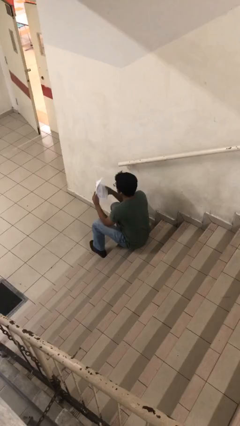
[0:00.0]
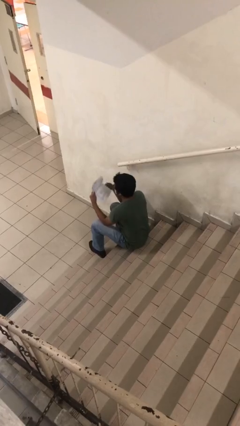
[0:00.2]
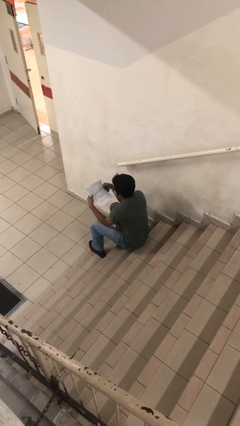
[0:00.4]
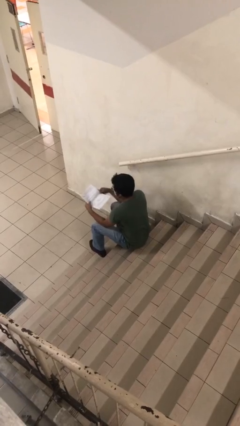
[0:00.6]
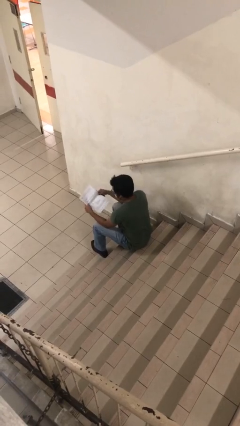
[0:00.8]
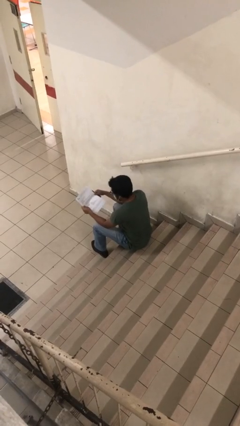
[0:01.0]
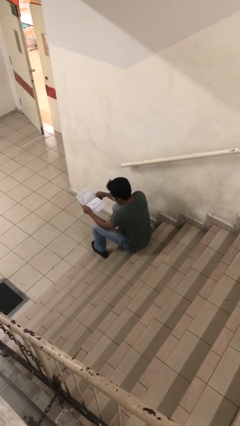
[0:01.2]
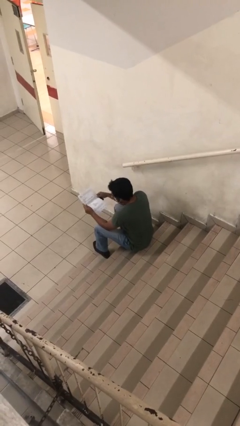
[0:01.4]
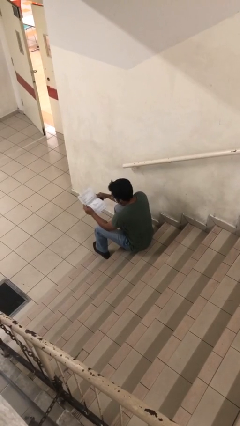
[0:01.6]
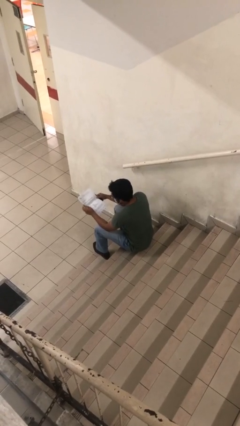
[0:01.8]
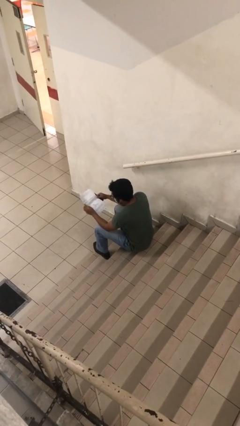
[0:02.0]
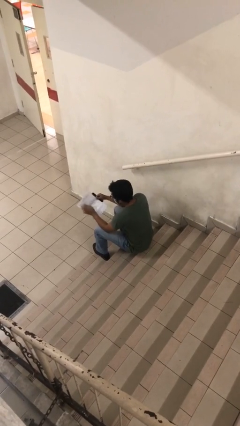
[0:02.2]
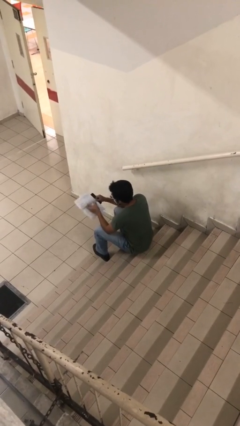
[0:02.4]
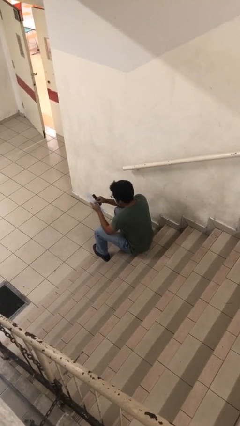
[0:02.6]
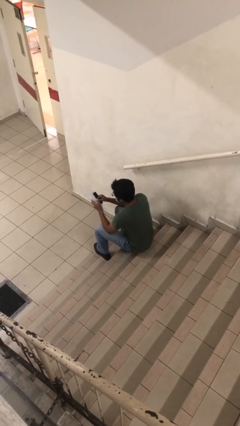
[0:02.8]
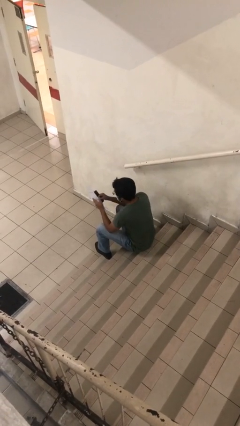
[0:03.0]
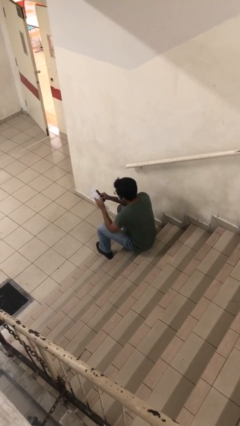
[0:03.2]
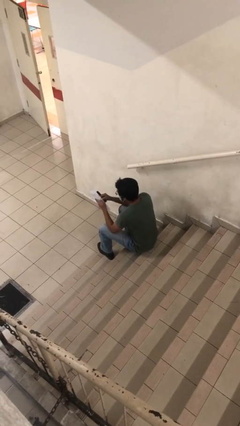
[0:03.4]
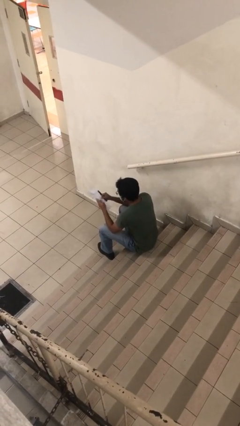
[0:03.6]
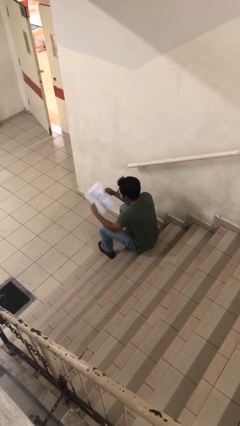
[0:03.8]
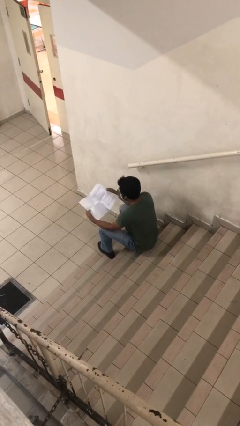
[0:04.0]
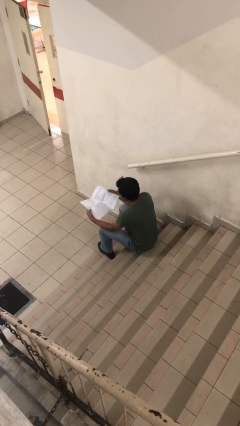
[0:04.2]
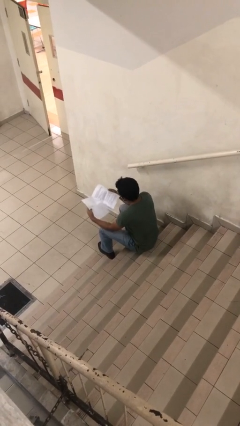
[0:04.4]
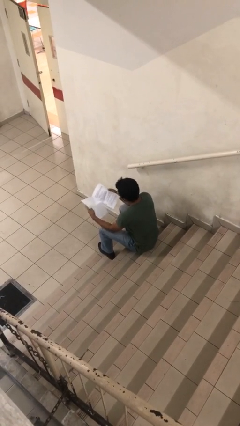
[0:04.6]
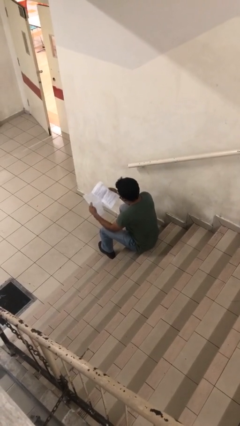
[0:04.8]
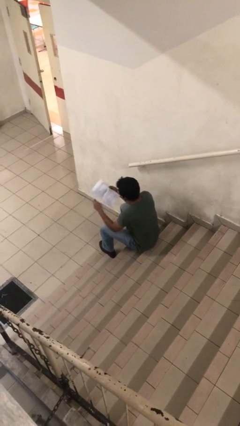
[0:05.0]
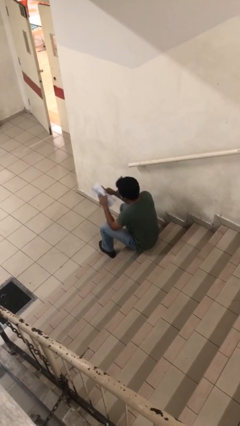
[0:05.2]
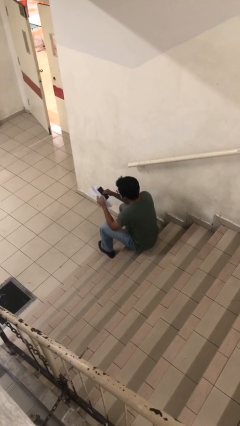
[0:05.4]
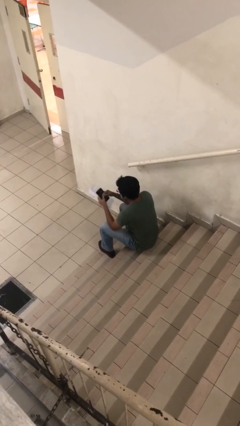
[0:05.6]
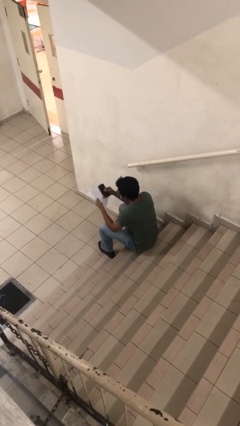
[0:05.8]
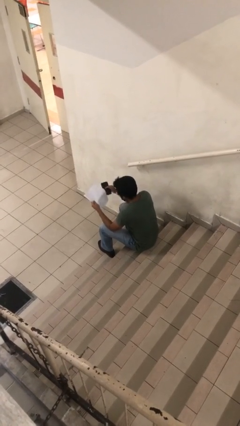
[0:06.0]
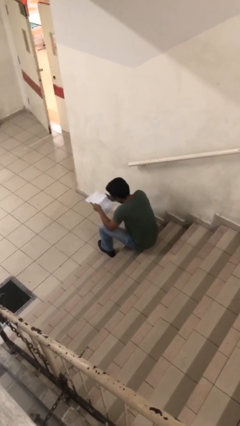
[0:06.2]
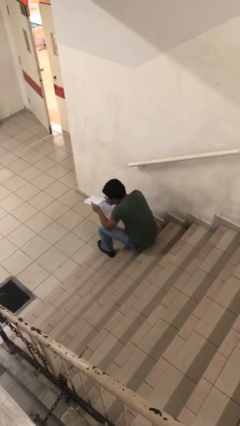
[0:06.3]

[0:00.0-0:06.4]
person reads document

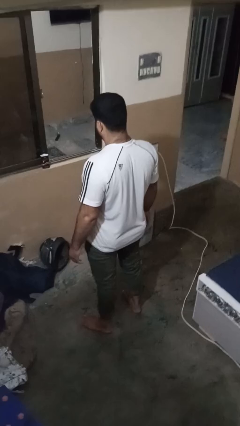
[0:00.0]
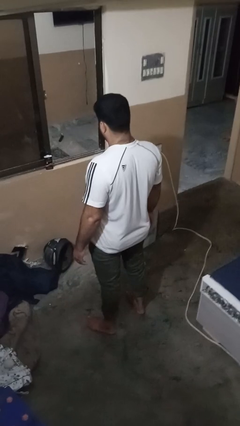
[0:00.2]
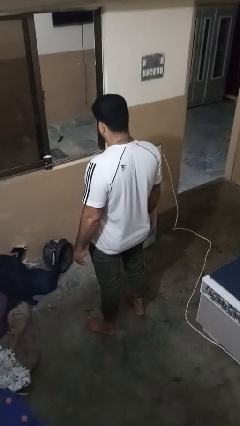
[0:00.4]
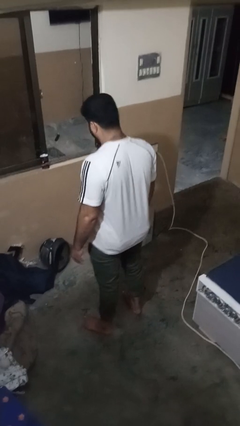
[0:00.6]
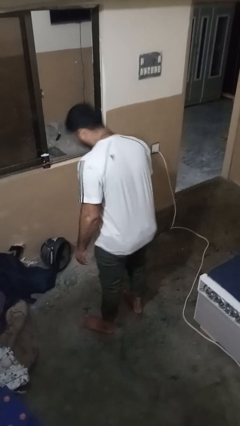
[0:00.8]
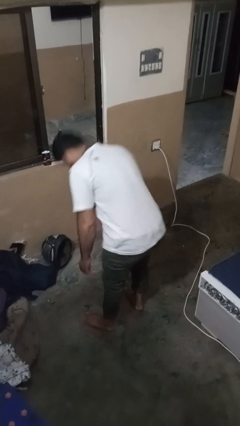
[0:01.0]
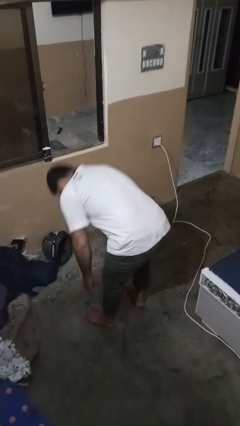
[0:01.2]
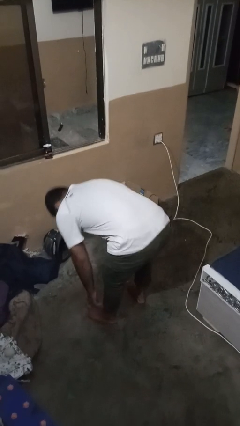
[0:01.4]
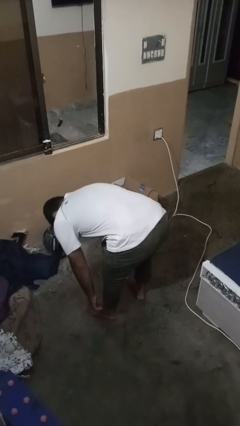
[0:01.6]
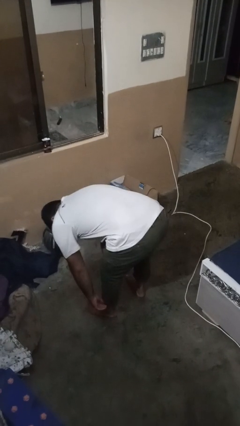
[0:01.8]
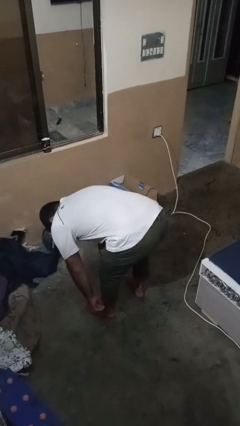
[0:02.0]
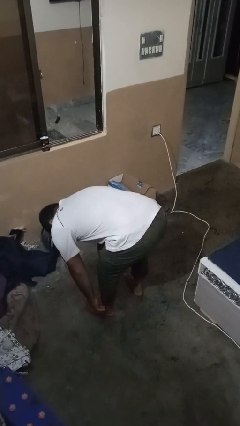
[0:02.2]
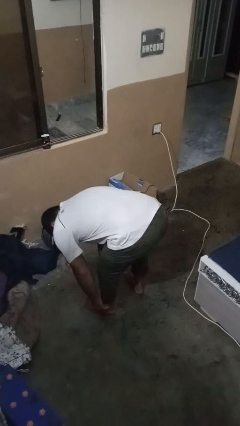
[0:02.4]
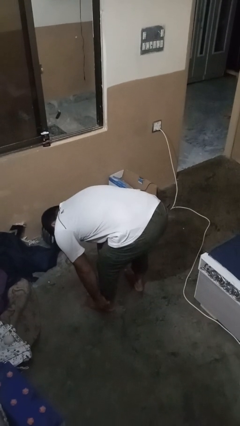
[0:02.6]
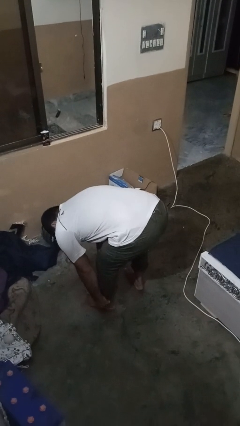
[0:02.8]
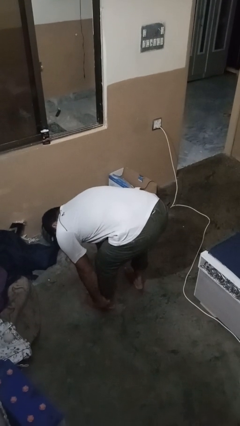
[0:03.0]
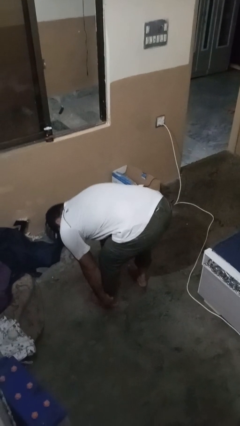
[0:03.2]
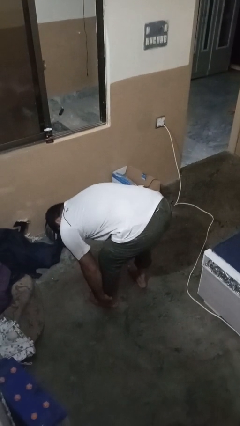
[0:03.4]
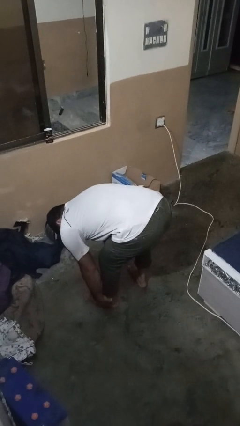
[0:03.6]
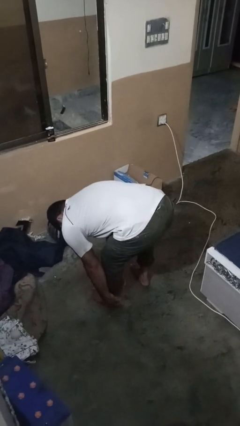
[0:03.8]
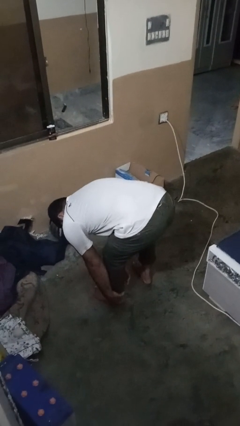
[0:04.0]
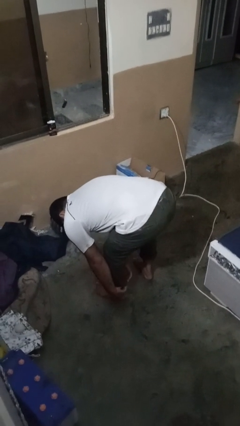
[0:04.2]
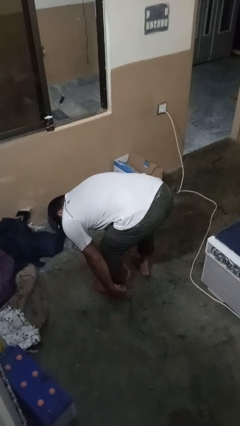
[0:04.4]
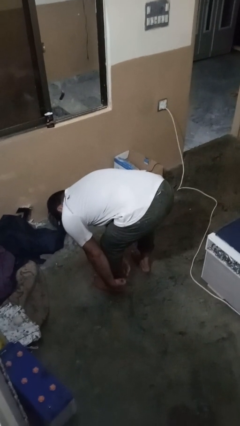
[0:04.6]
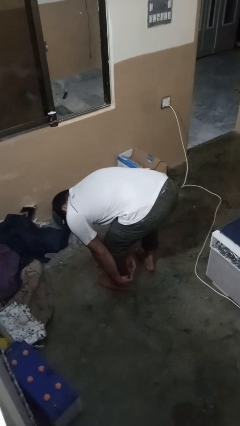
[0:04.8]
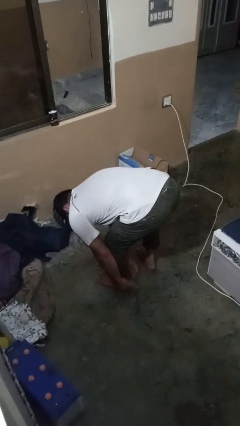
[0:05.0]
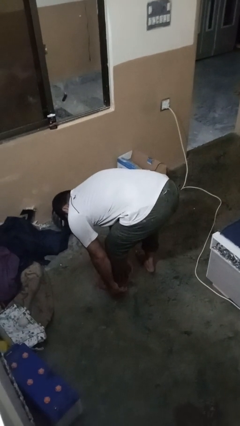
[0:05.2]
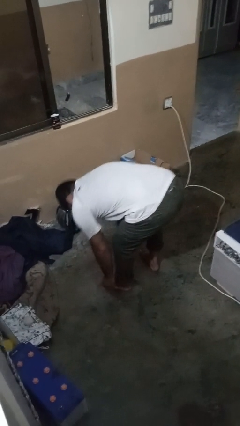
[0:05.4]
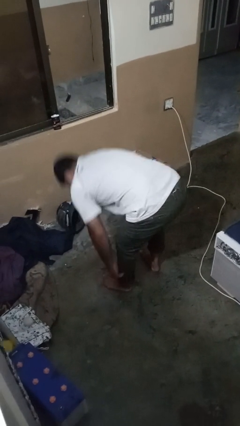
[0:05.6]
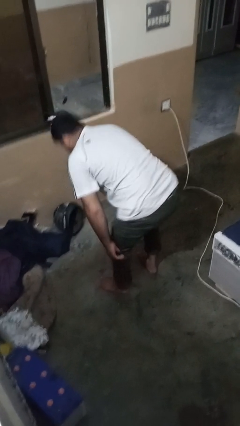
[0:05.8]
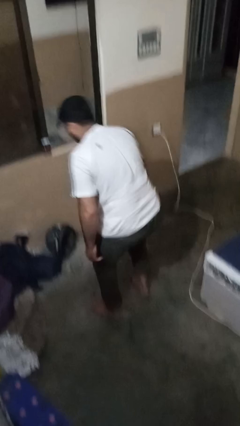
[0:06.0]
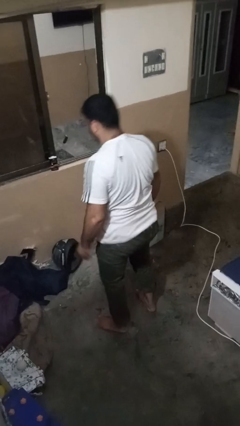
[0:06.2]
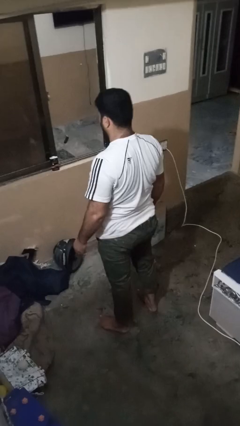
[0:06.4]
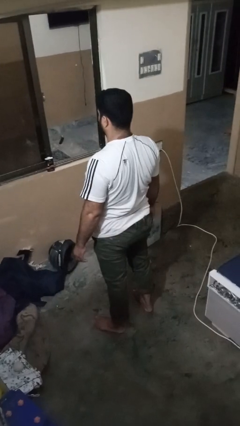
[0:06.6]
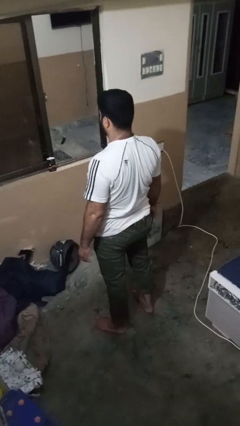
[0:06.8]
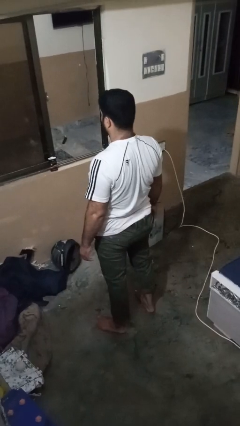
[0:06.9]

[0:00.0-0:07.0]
person hikes up pants

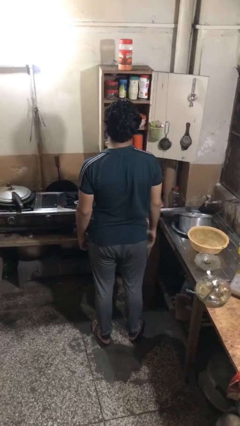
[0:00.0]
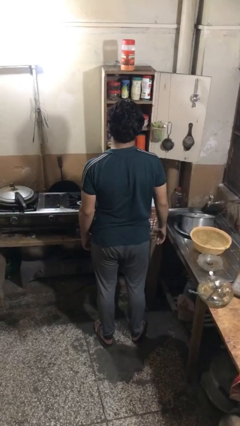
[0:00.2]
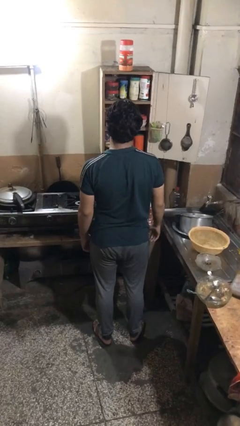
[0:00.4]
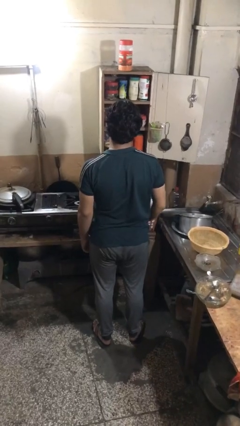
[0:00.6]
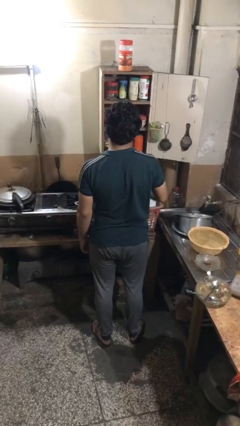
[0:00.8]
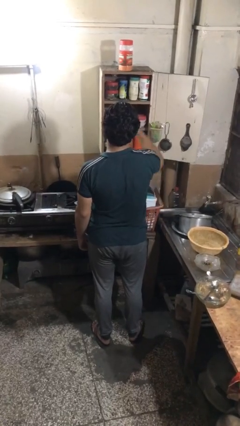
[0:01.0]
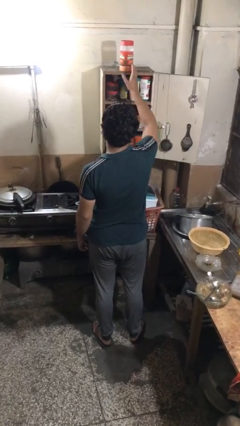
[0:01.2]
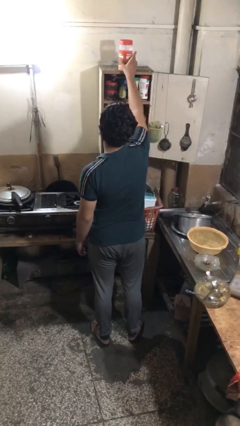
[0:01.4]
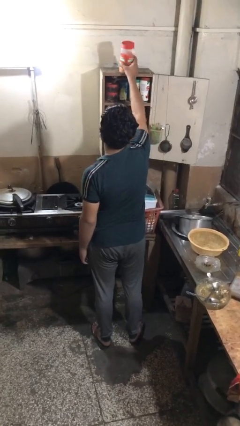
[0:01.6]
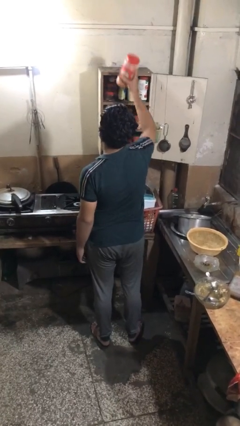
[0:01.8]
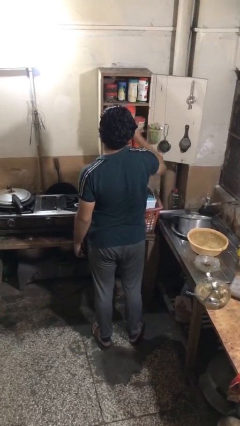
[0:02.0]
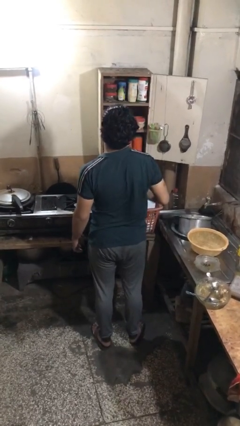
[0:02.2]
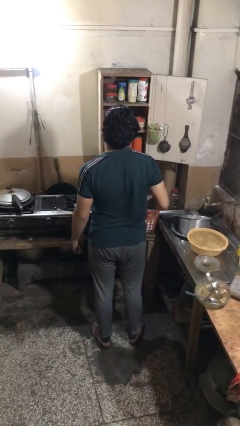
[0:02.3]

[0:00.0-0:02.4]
person puts object in cabinet

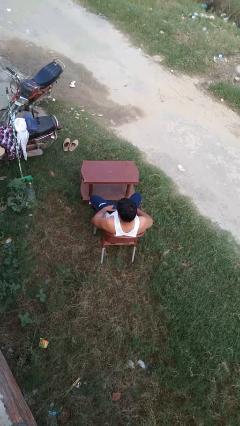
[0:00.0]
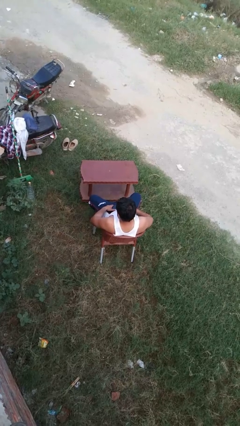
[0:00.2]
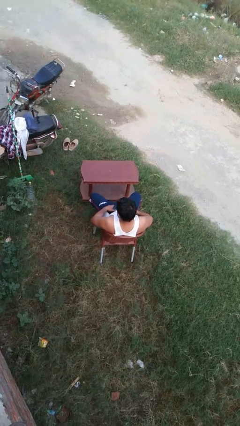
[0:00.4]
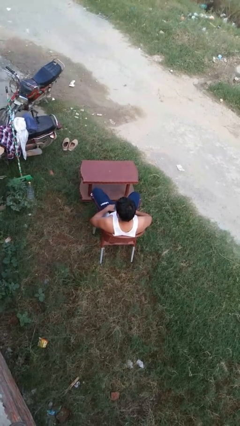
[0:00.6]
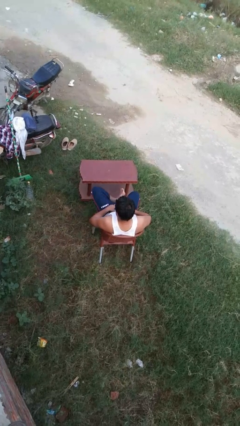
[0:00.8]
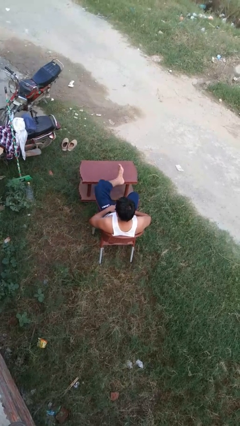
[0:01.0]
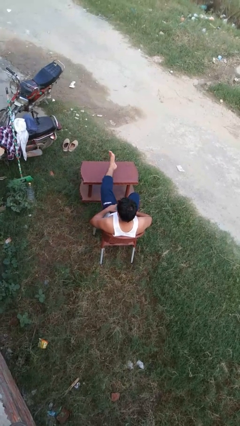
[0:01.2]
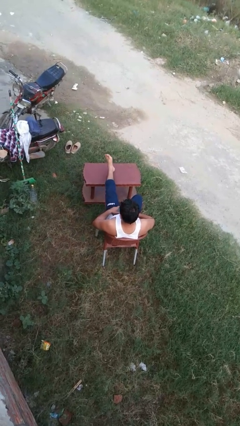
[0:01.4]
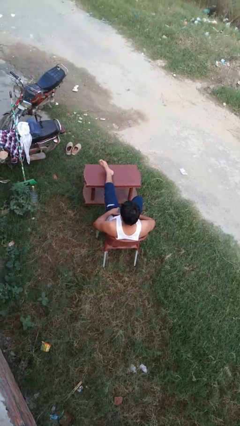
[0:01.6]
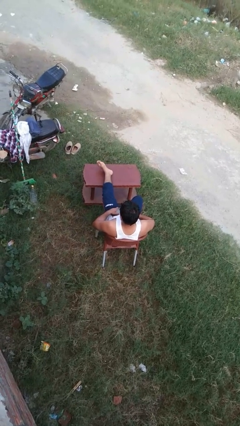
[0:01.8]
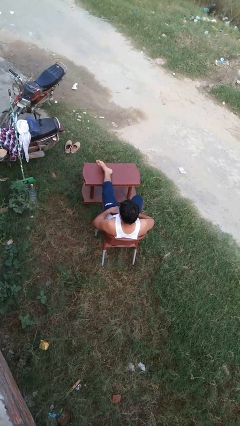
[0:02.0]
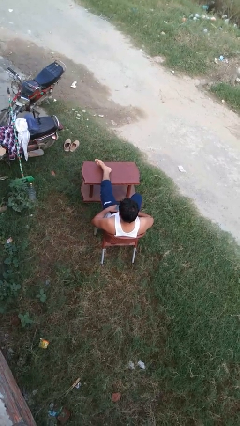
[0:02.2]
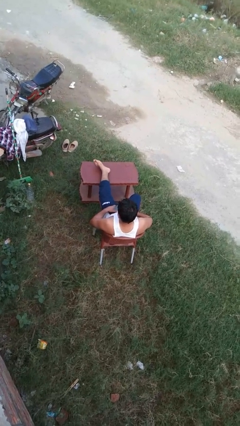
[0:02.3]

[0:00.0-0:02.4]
person puts feet up
